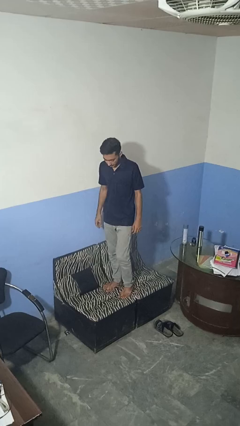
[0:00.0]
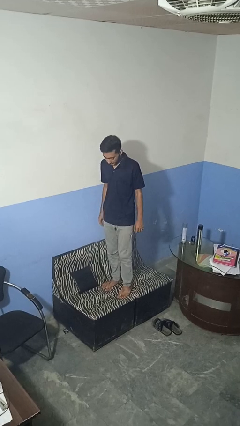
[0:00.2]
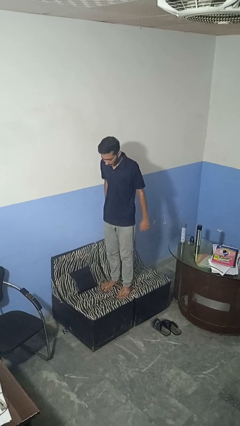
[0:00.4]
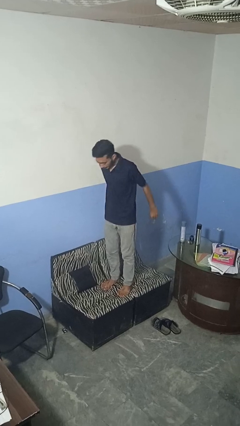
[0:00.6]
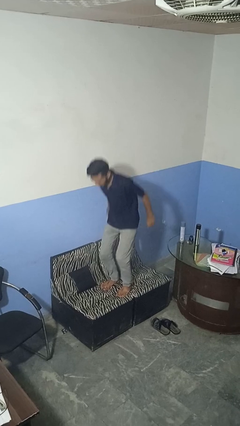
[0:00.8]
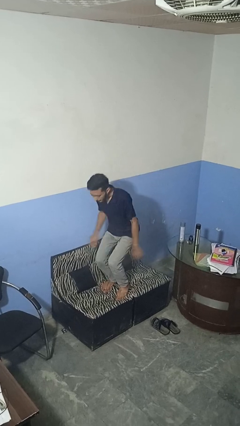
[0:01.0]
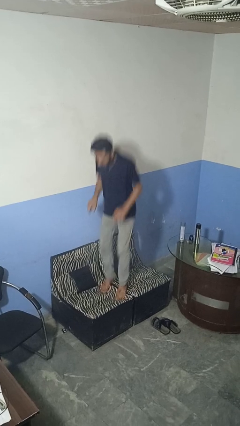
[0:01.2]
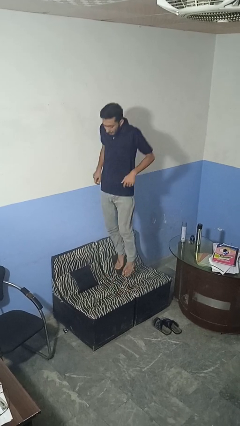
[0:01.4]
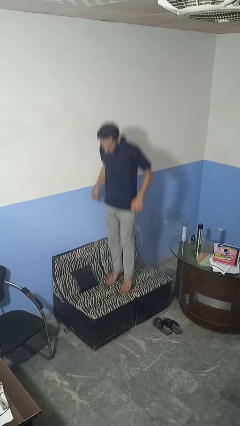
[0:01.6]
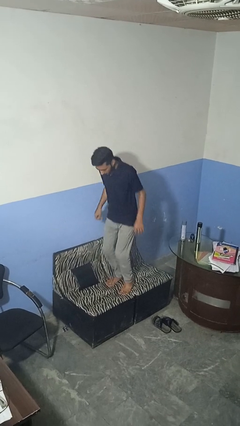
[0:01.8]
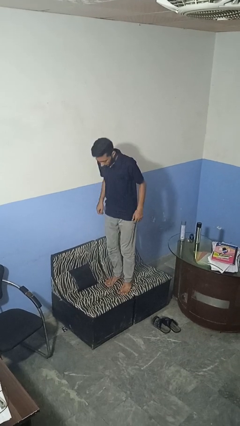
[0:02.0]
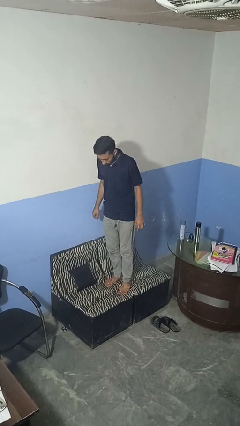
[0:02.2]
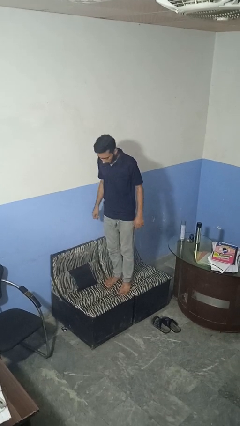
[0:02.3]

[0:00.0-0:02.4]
person jumps on couch

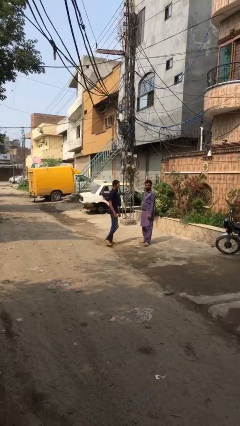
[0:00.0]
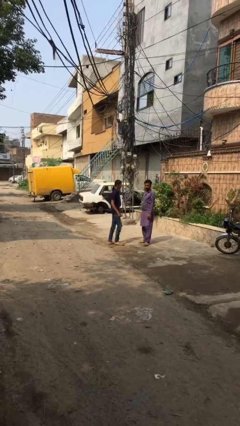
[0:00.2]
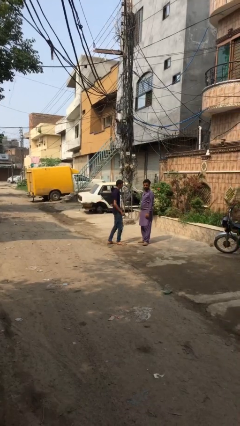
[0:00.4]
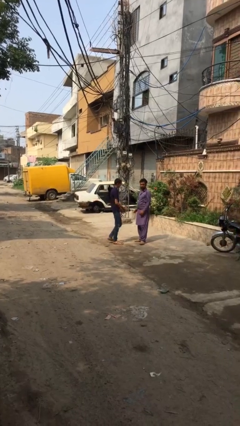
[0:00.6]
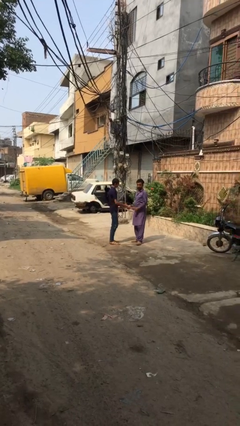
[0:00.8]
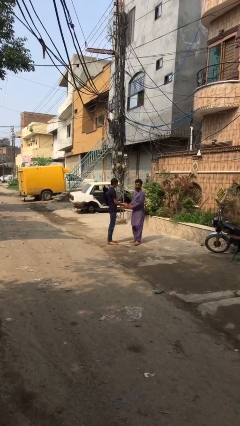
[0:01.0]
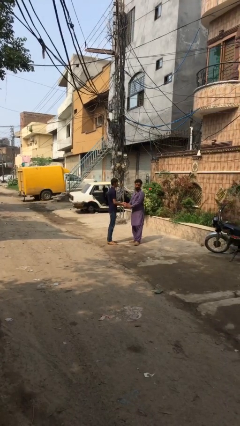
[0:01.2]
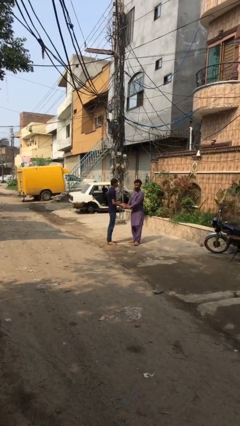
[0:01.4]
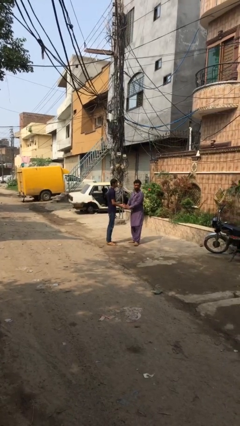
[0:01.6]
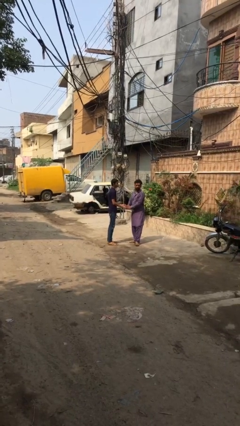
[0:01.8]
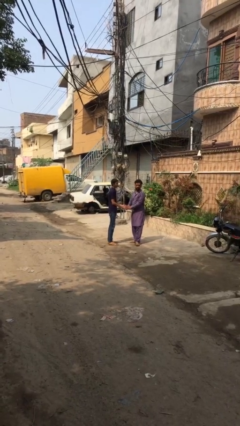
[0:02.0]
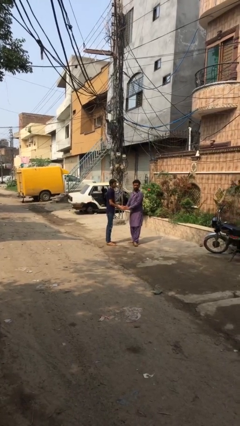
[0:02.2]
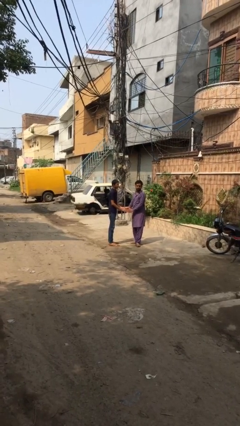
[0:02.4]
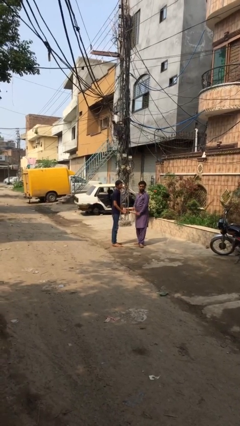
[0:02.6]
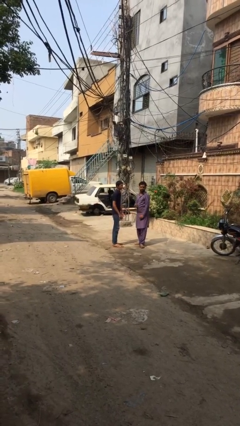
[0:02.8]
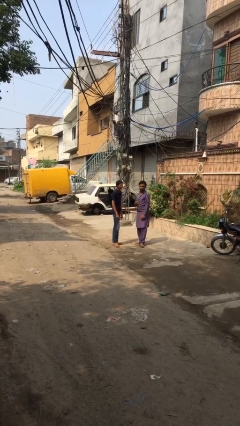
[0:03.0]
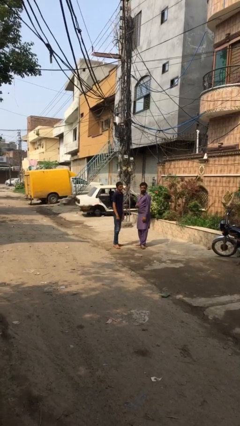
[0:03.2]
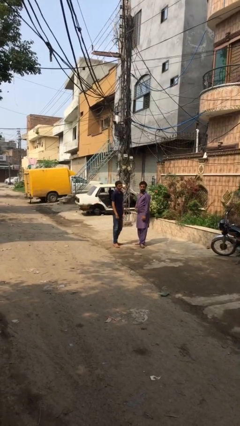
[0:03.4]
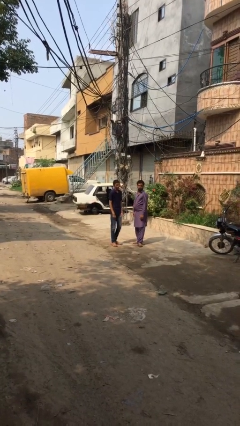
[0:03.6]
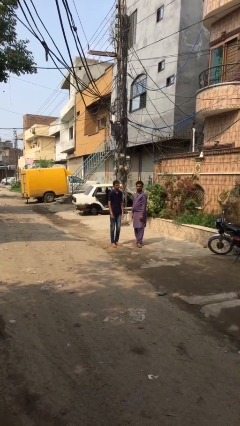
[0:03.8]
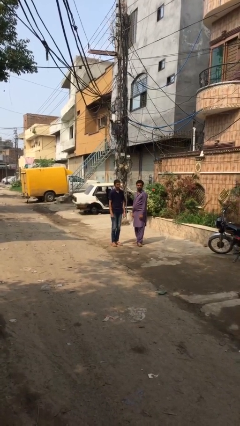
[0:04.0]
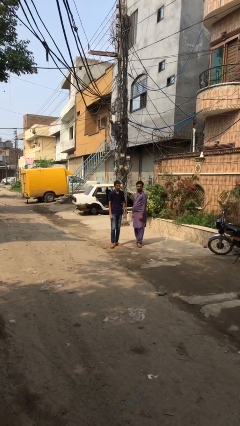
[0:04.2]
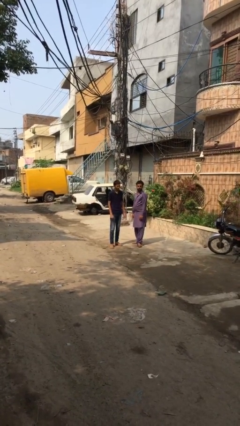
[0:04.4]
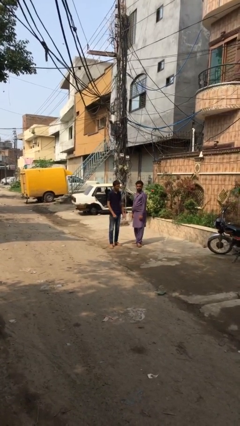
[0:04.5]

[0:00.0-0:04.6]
person shakes hand

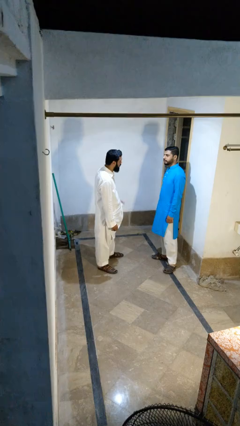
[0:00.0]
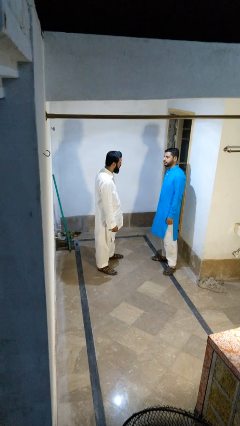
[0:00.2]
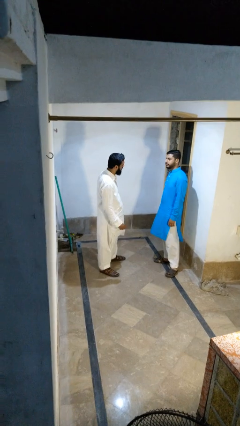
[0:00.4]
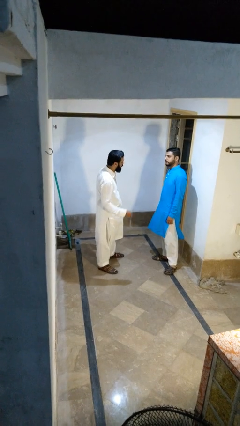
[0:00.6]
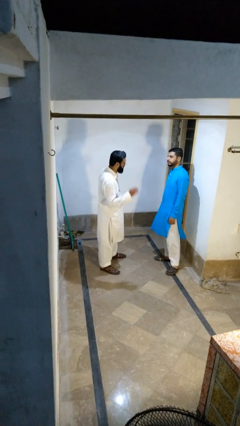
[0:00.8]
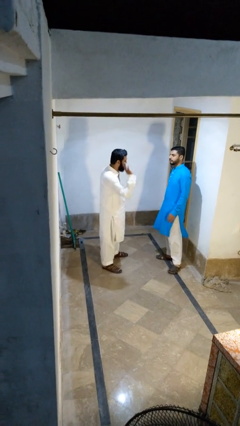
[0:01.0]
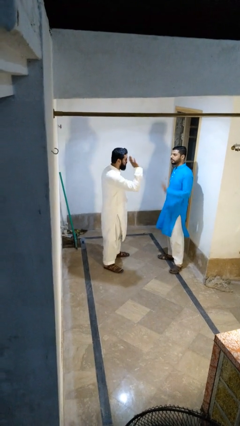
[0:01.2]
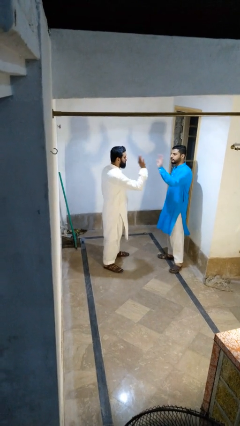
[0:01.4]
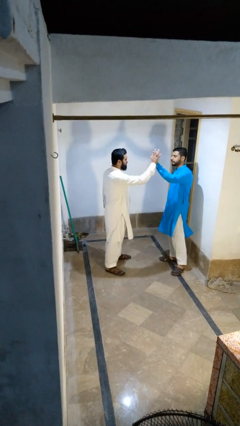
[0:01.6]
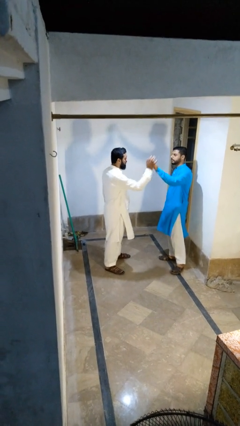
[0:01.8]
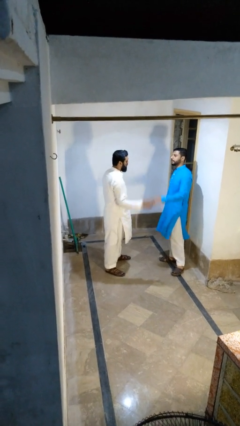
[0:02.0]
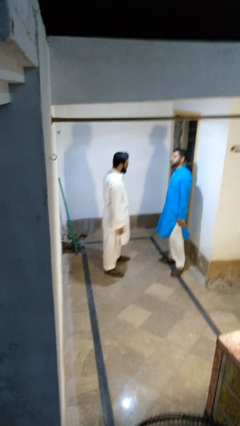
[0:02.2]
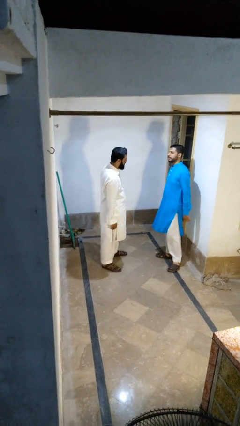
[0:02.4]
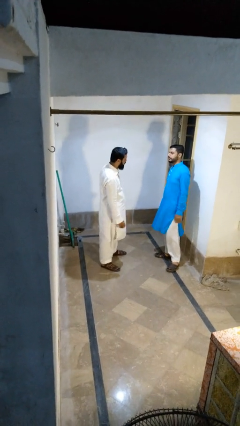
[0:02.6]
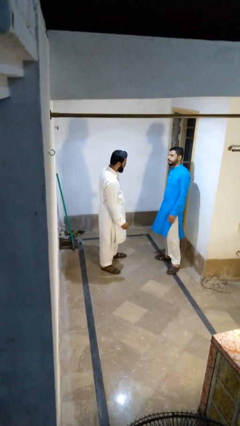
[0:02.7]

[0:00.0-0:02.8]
person highfives hand

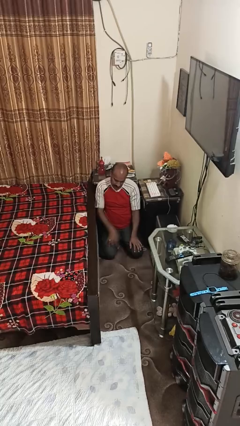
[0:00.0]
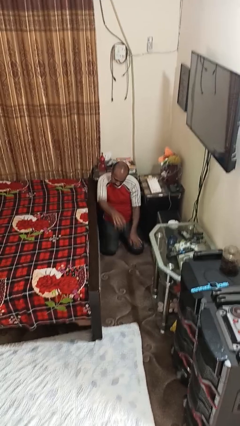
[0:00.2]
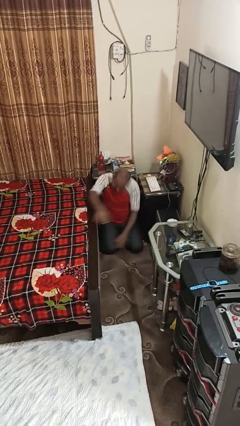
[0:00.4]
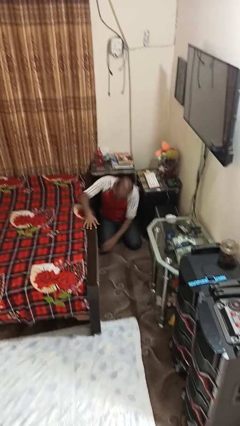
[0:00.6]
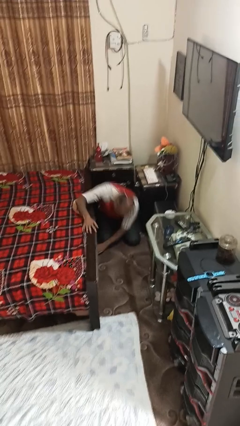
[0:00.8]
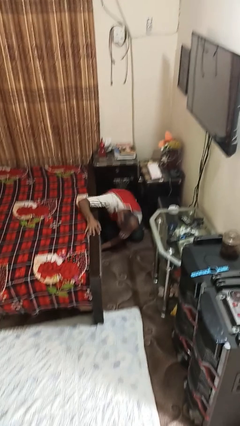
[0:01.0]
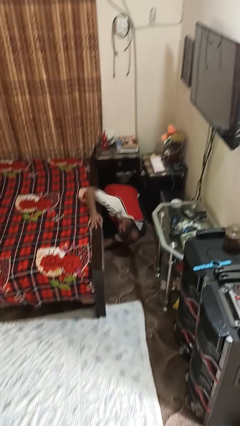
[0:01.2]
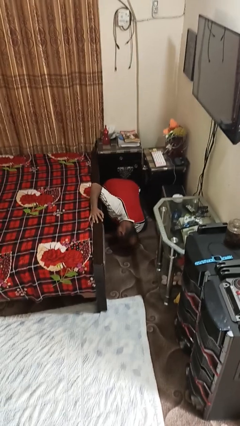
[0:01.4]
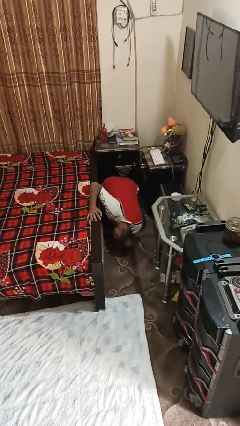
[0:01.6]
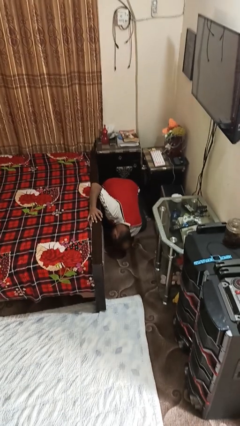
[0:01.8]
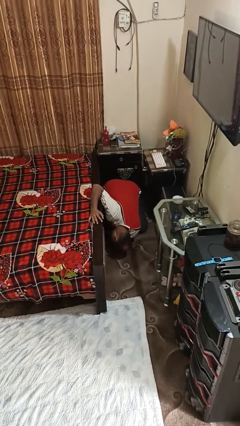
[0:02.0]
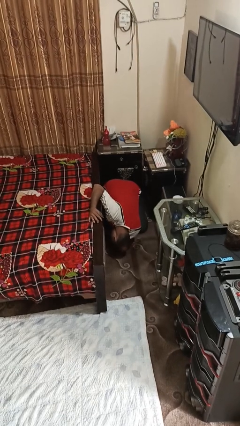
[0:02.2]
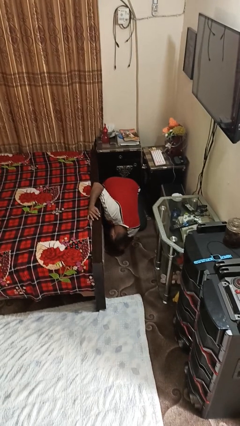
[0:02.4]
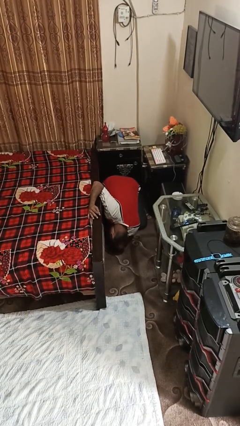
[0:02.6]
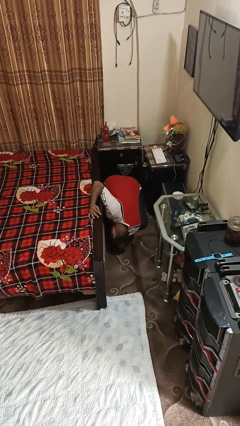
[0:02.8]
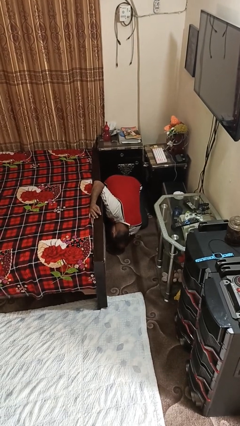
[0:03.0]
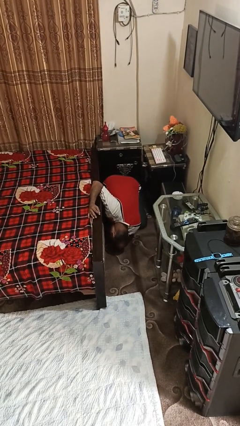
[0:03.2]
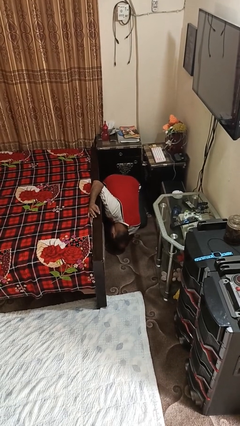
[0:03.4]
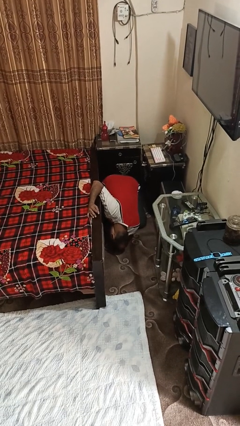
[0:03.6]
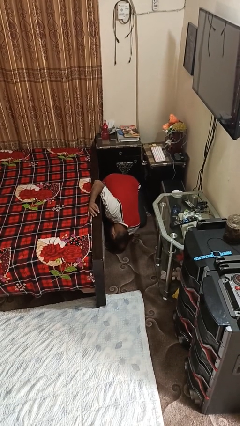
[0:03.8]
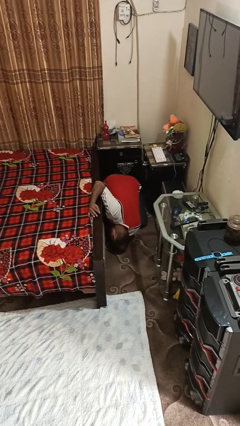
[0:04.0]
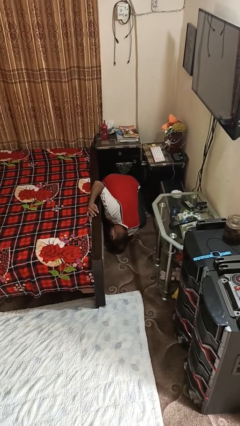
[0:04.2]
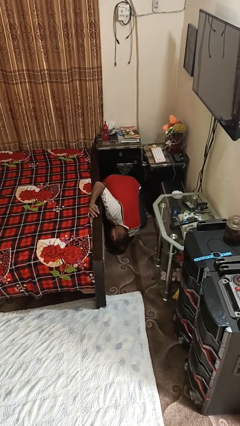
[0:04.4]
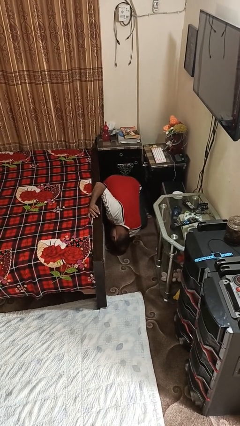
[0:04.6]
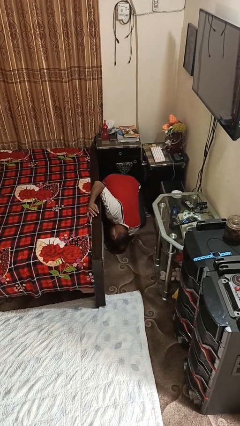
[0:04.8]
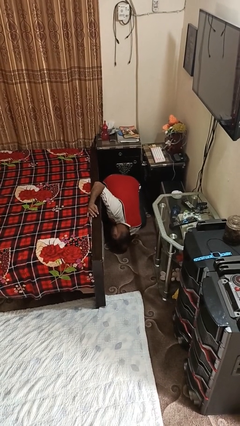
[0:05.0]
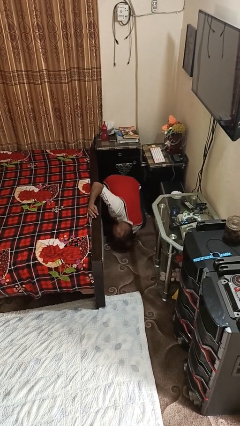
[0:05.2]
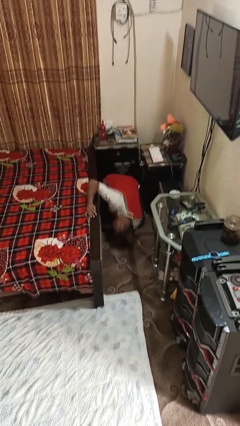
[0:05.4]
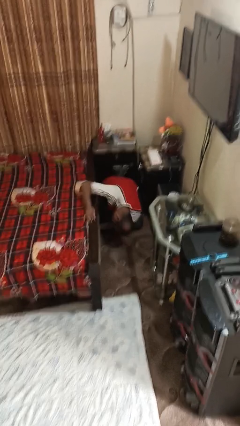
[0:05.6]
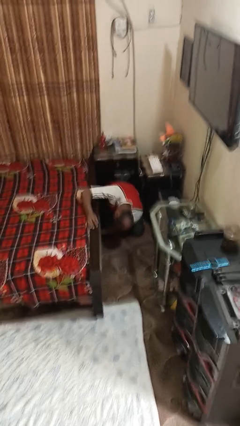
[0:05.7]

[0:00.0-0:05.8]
person searches under bed

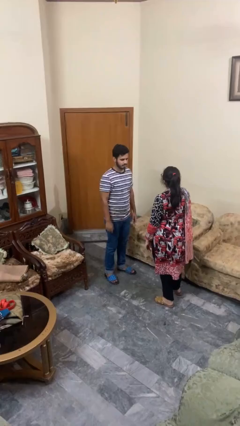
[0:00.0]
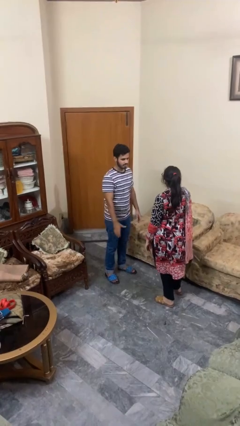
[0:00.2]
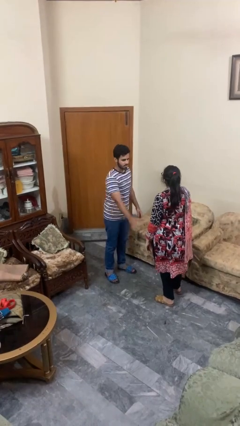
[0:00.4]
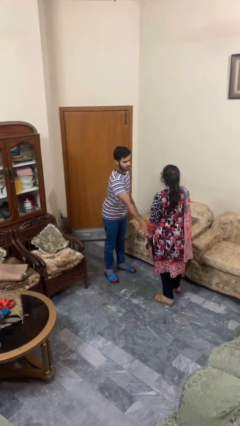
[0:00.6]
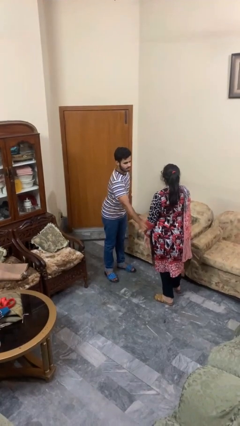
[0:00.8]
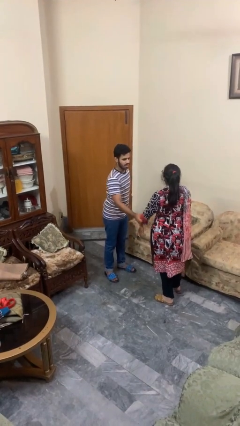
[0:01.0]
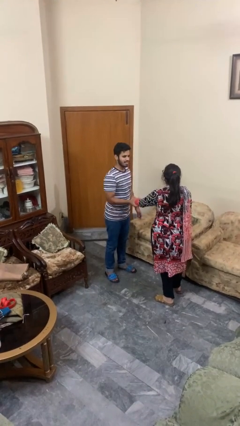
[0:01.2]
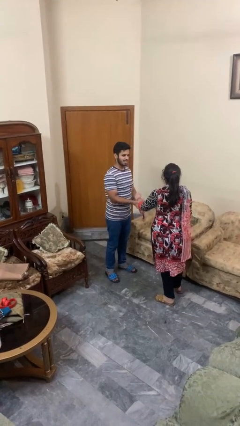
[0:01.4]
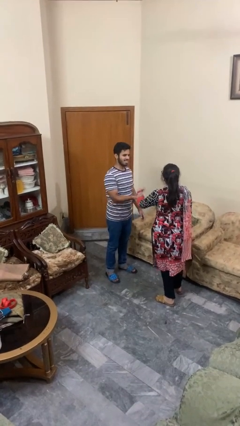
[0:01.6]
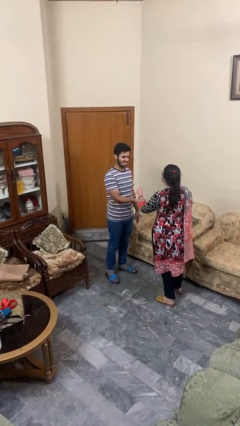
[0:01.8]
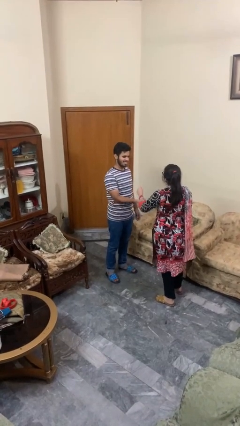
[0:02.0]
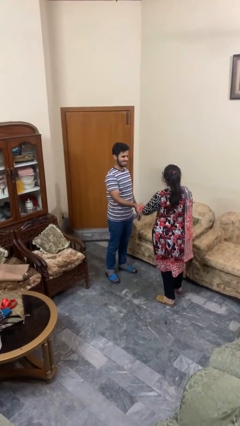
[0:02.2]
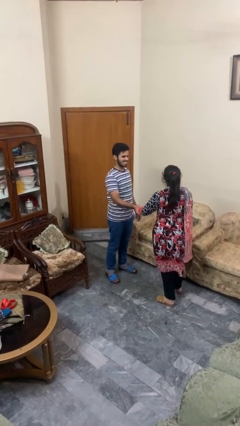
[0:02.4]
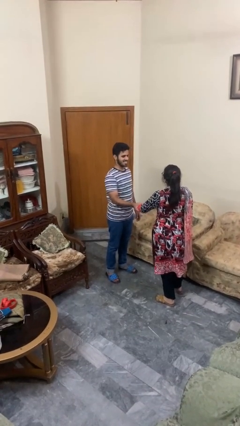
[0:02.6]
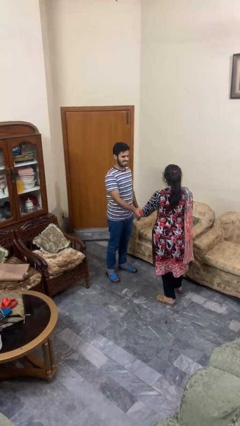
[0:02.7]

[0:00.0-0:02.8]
person grabs person by forearm
